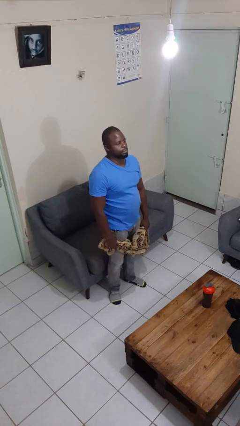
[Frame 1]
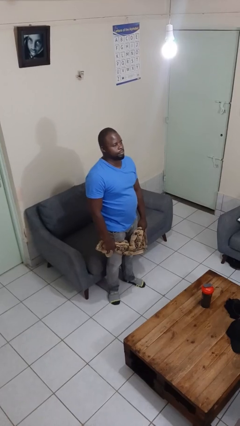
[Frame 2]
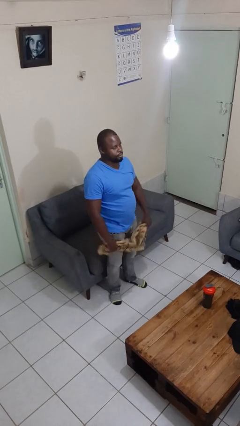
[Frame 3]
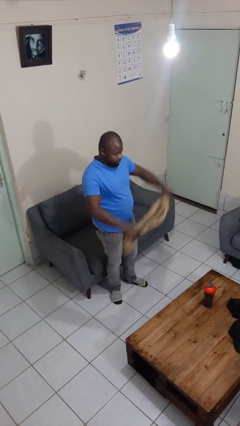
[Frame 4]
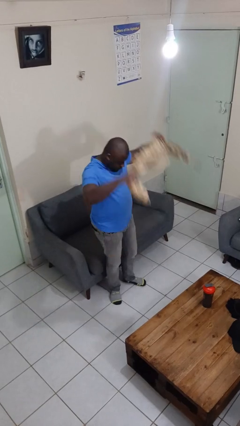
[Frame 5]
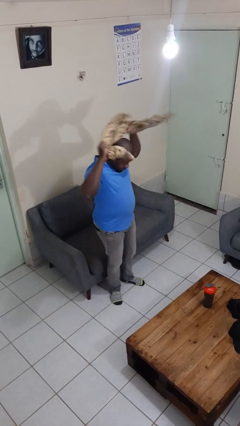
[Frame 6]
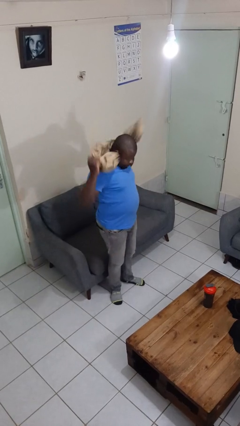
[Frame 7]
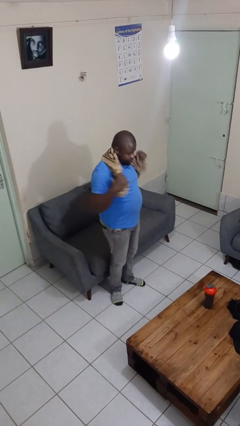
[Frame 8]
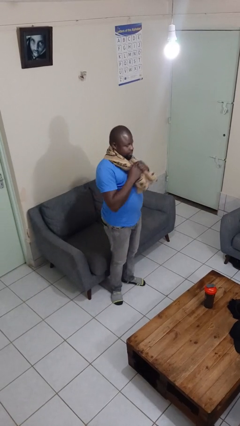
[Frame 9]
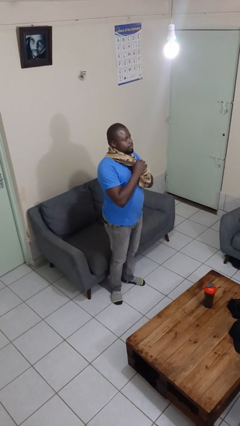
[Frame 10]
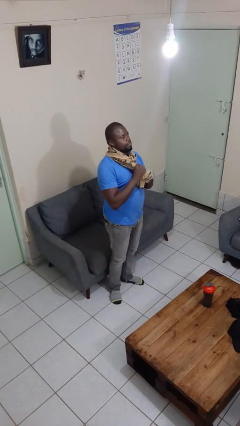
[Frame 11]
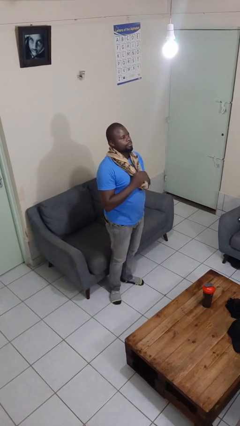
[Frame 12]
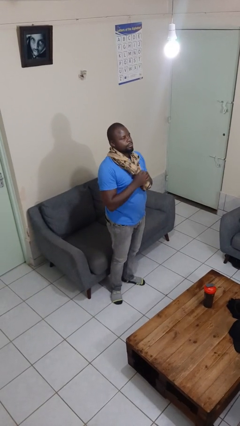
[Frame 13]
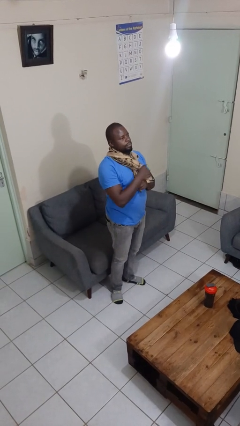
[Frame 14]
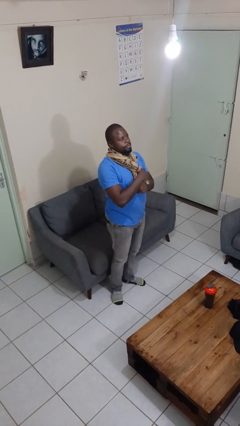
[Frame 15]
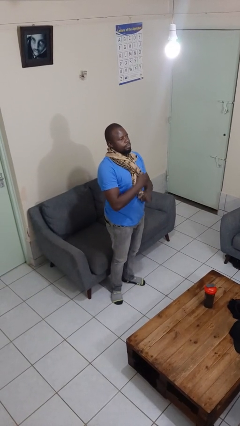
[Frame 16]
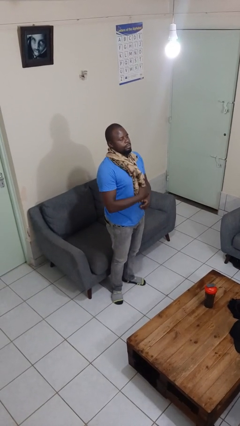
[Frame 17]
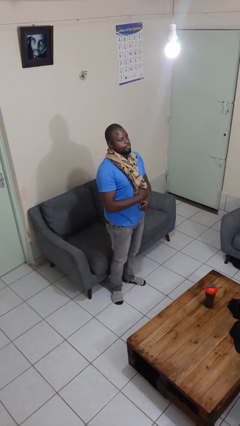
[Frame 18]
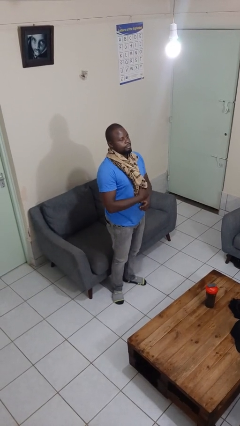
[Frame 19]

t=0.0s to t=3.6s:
person puts on scarf

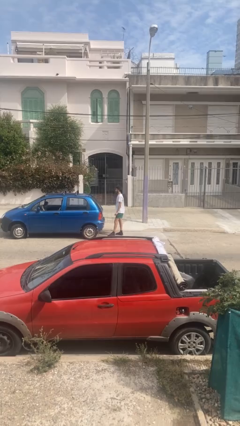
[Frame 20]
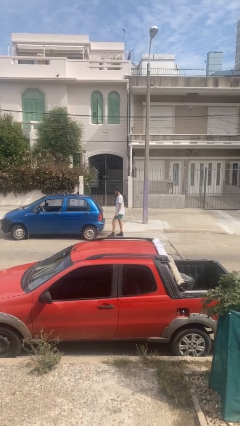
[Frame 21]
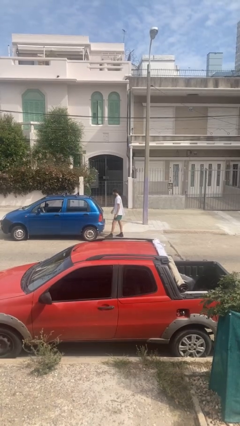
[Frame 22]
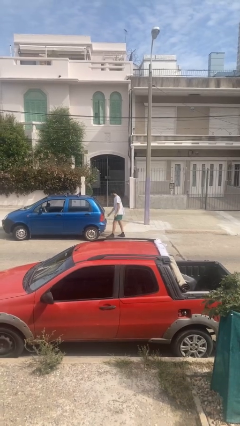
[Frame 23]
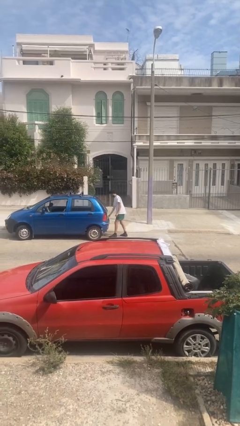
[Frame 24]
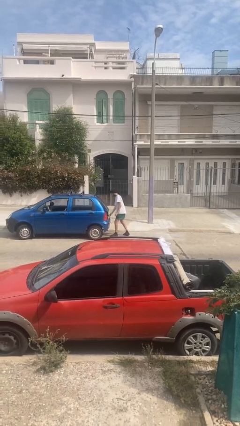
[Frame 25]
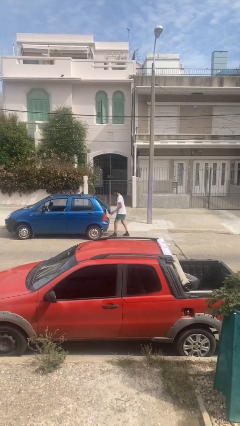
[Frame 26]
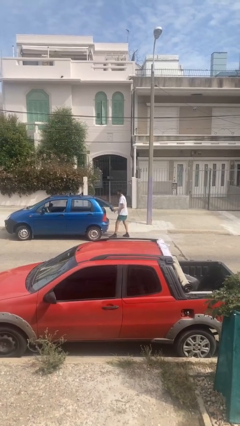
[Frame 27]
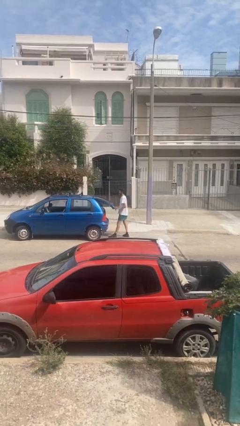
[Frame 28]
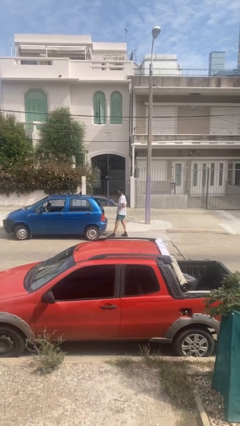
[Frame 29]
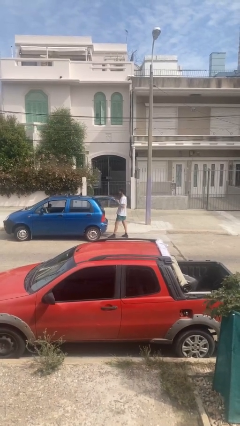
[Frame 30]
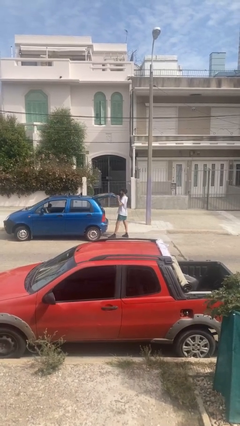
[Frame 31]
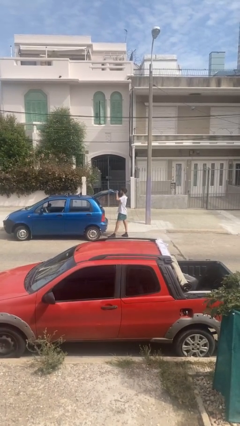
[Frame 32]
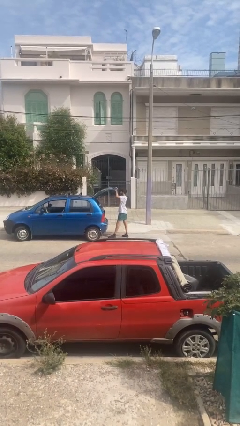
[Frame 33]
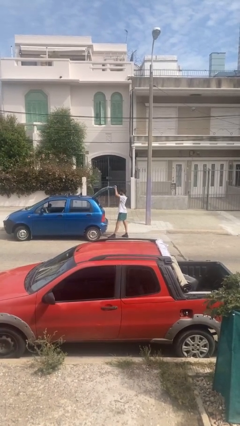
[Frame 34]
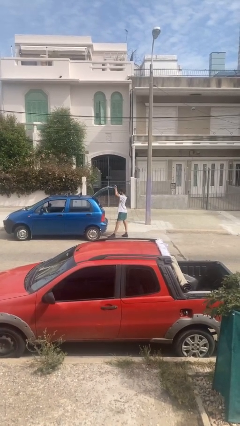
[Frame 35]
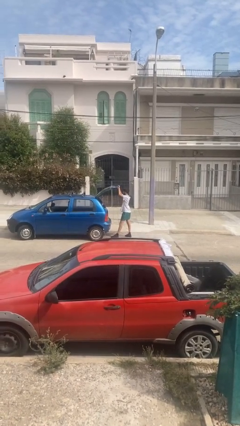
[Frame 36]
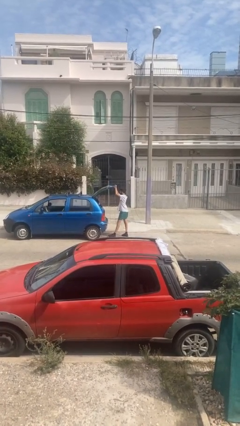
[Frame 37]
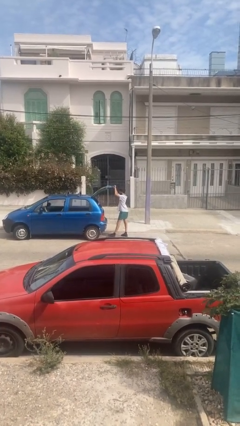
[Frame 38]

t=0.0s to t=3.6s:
person opens car trunk

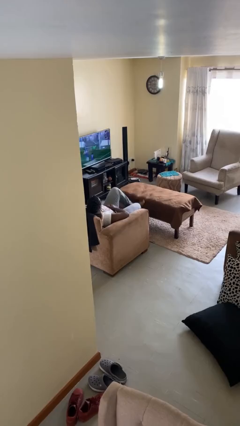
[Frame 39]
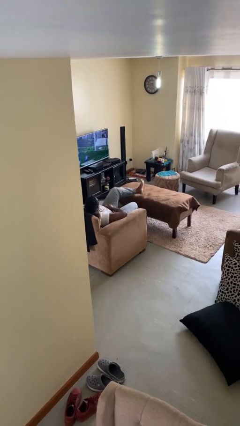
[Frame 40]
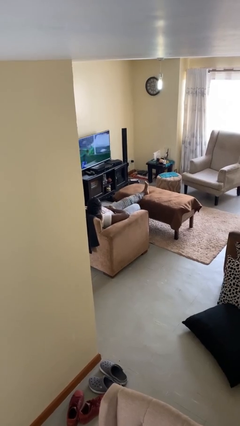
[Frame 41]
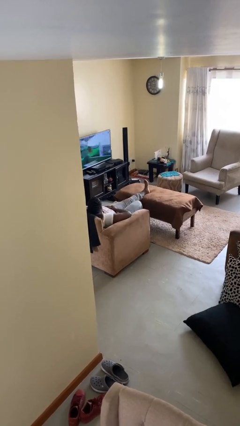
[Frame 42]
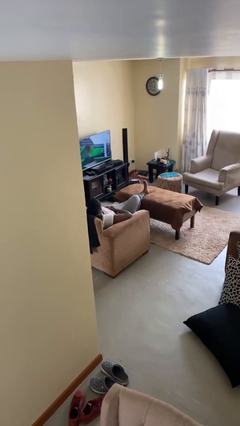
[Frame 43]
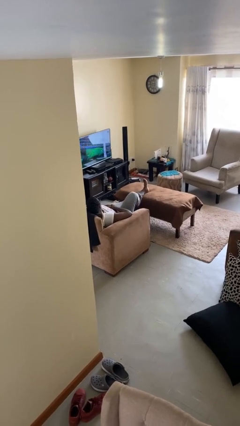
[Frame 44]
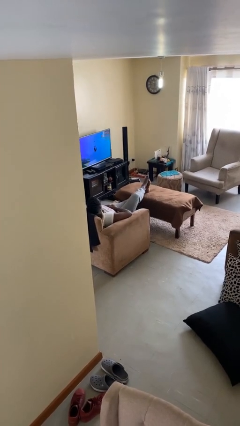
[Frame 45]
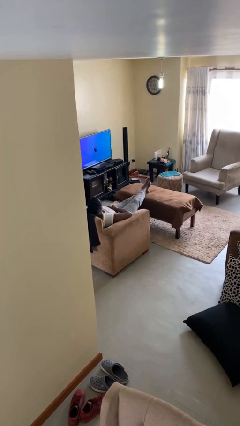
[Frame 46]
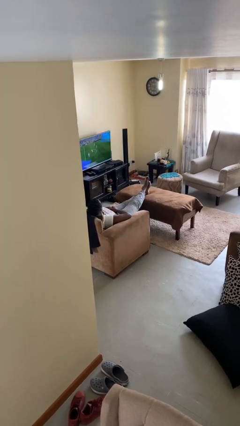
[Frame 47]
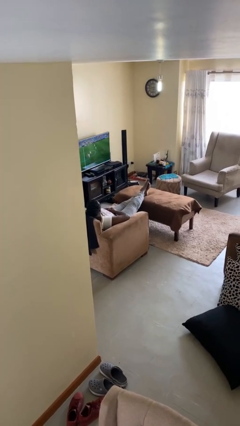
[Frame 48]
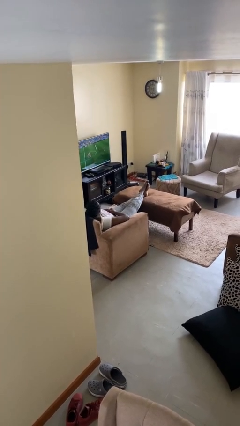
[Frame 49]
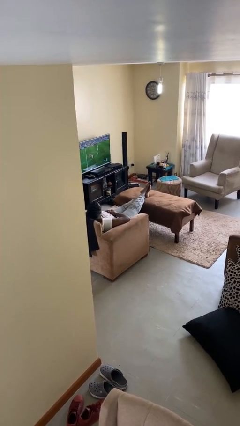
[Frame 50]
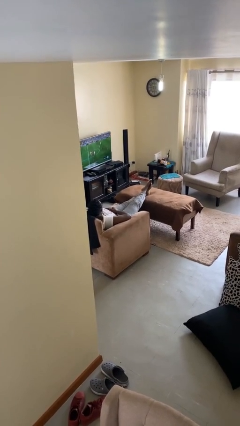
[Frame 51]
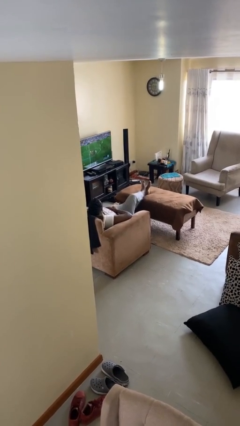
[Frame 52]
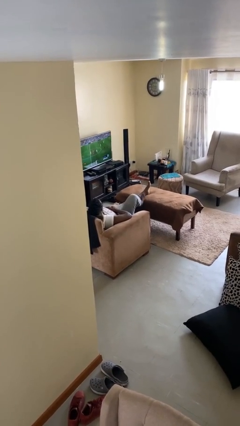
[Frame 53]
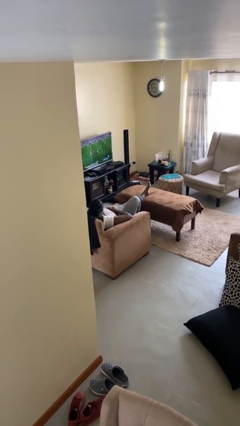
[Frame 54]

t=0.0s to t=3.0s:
person puts feet up

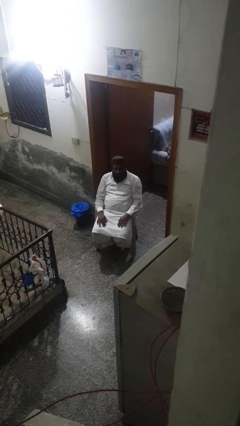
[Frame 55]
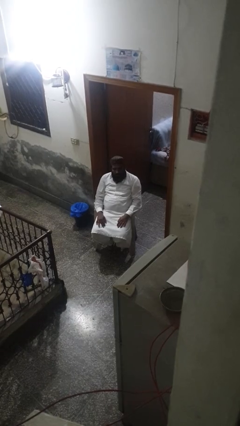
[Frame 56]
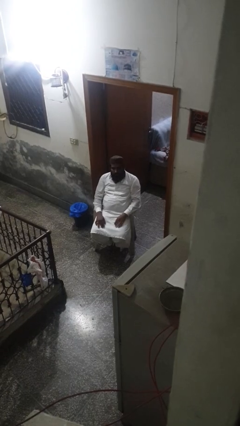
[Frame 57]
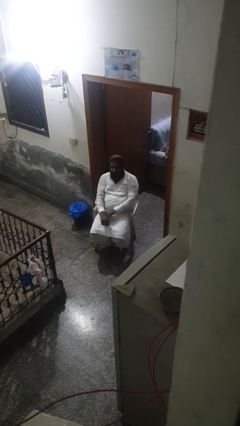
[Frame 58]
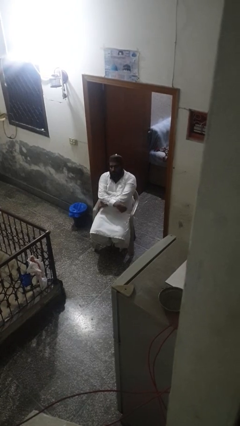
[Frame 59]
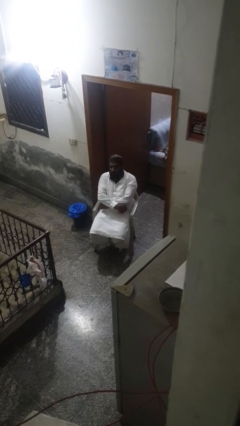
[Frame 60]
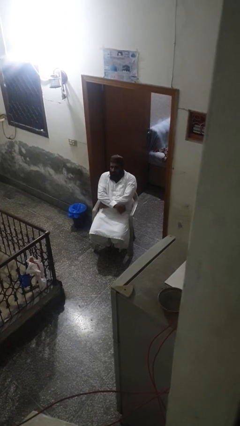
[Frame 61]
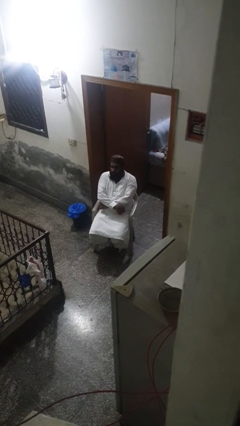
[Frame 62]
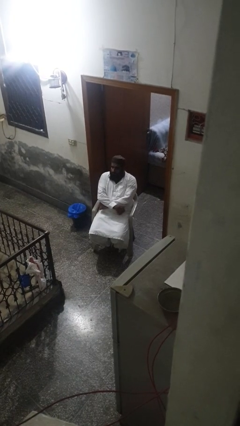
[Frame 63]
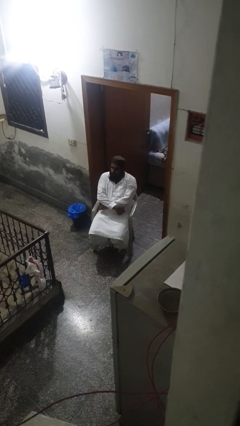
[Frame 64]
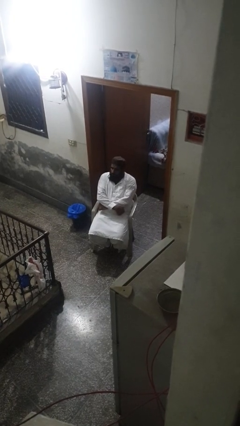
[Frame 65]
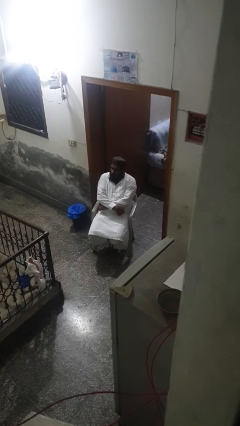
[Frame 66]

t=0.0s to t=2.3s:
person crosses arms

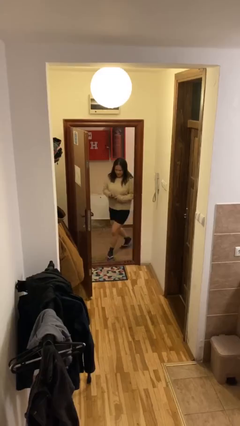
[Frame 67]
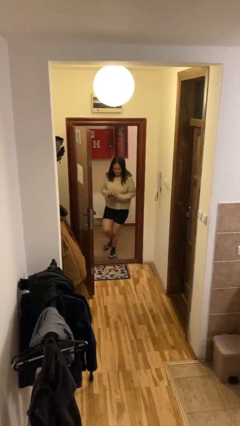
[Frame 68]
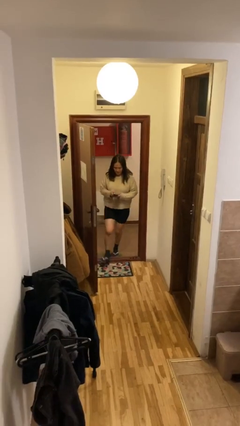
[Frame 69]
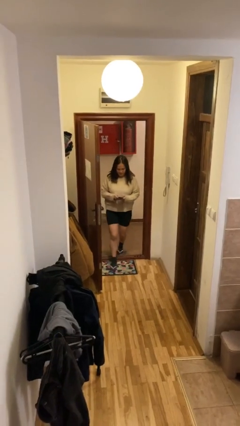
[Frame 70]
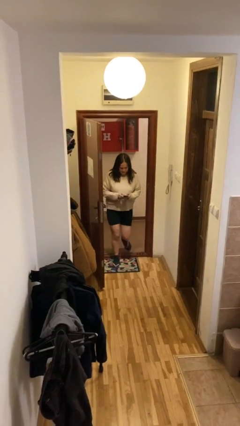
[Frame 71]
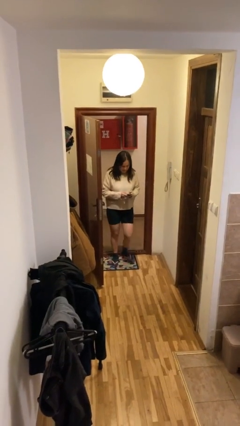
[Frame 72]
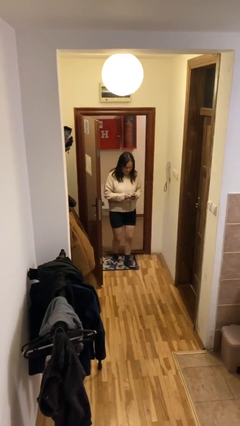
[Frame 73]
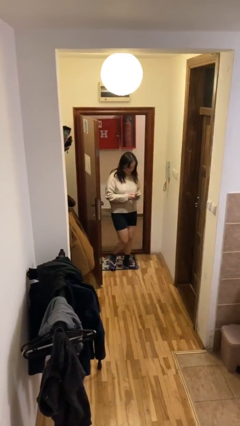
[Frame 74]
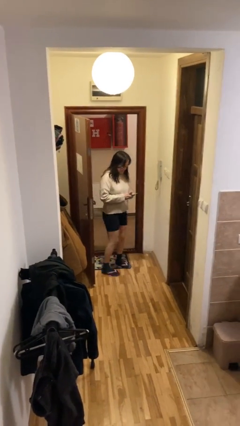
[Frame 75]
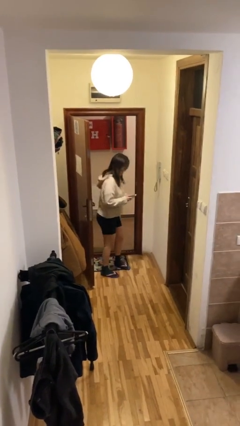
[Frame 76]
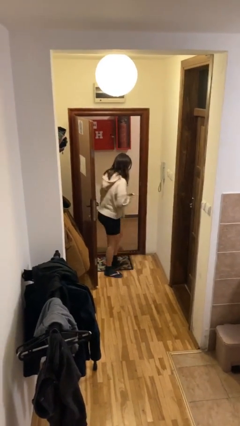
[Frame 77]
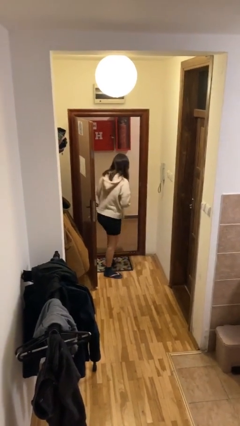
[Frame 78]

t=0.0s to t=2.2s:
person enters scene through structure

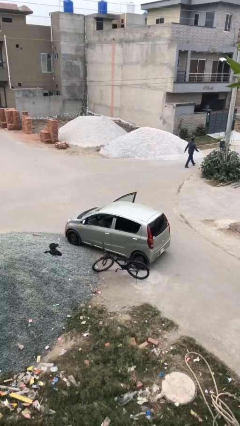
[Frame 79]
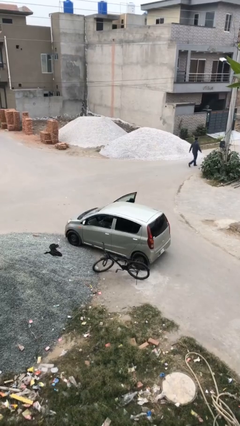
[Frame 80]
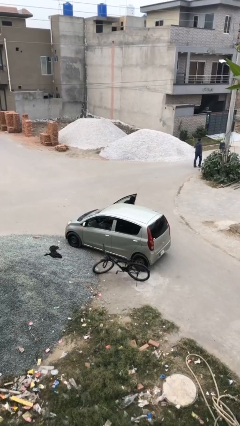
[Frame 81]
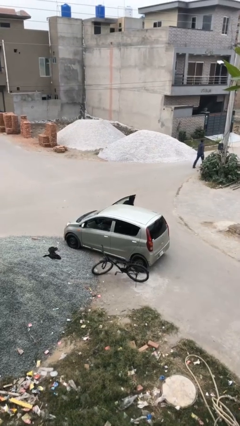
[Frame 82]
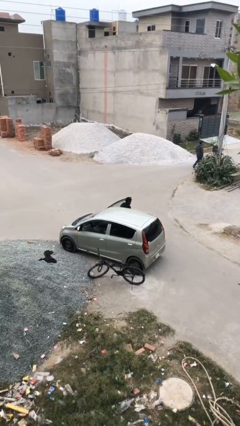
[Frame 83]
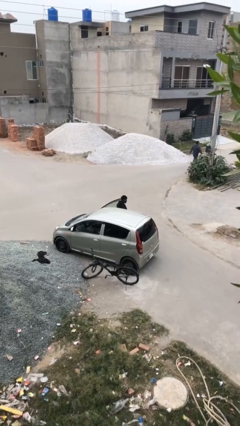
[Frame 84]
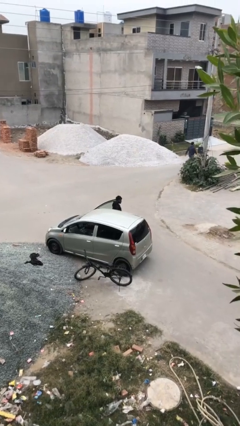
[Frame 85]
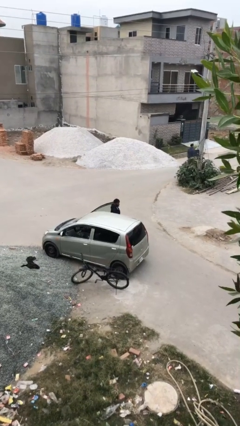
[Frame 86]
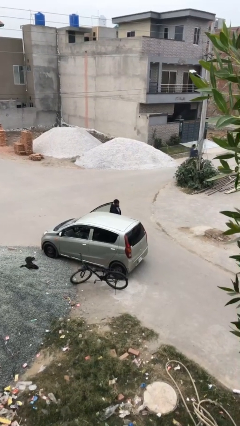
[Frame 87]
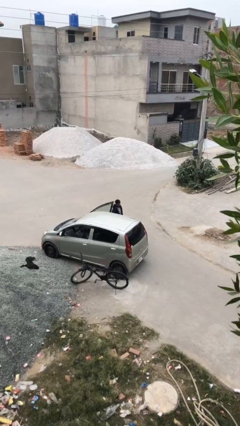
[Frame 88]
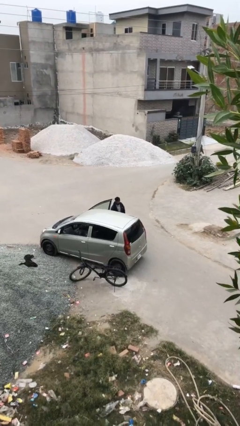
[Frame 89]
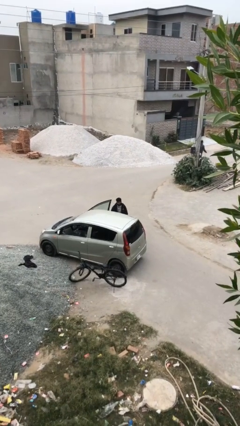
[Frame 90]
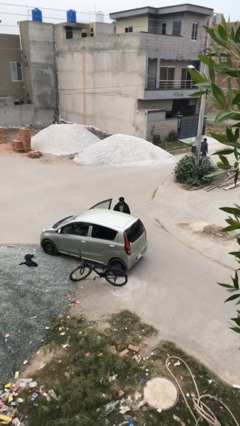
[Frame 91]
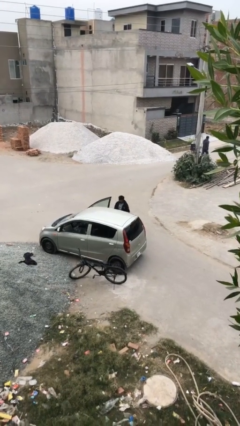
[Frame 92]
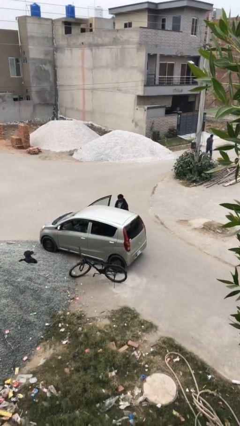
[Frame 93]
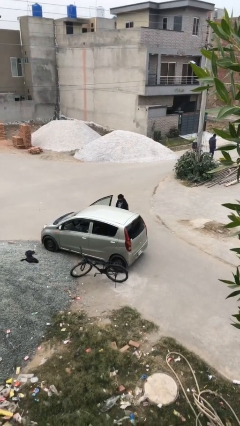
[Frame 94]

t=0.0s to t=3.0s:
person exits car
